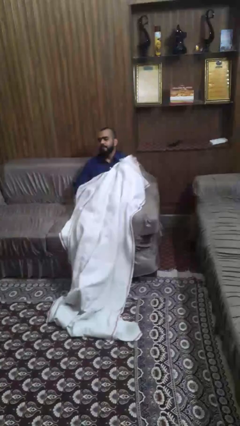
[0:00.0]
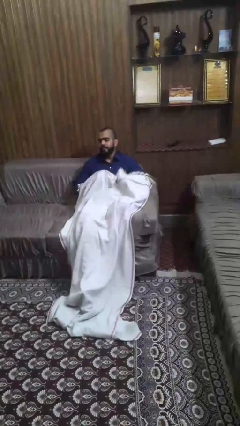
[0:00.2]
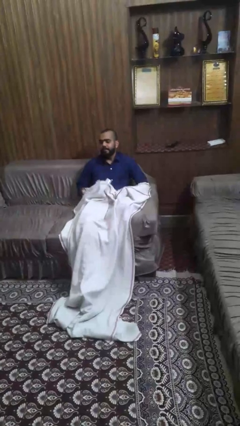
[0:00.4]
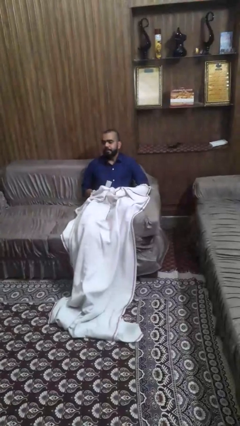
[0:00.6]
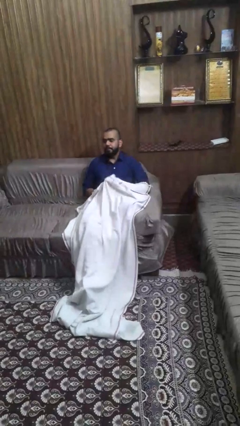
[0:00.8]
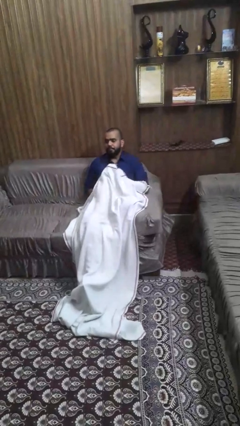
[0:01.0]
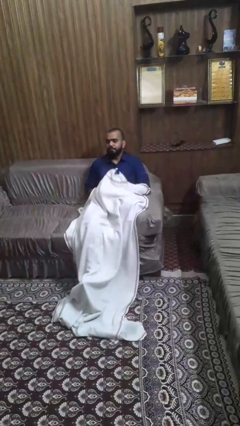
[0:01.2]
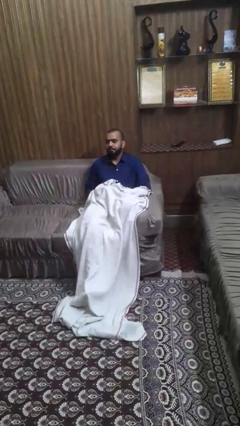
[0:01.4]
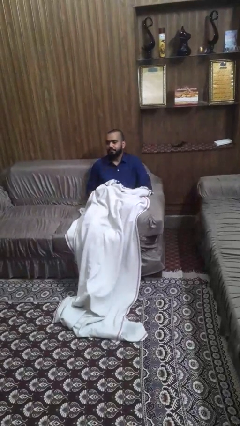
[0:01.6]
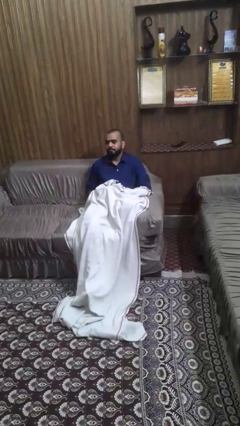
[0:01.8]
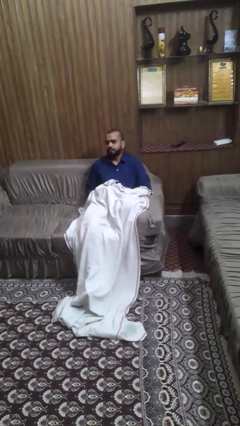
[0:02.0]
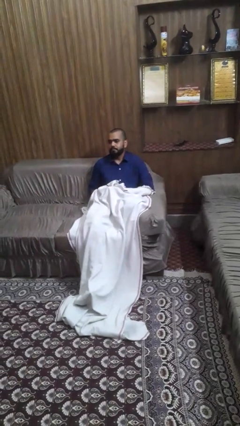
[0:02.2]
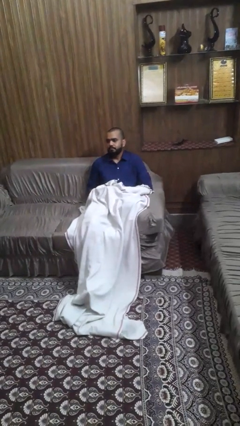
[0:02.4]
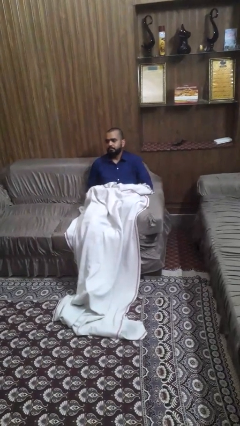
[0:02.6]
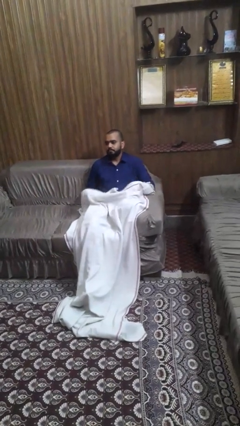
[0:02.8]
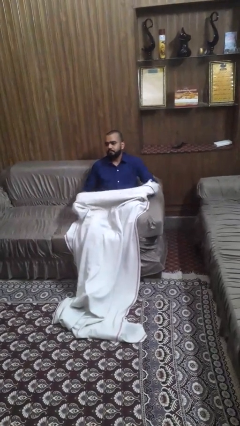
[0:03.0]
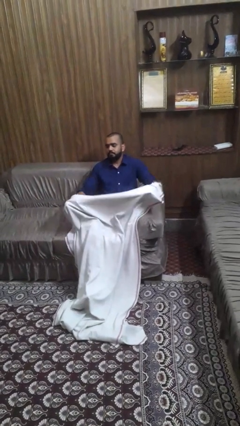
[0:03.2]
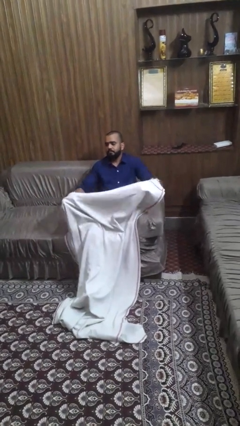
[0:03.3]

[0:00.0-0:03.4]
person covers with blanket

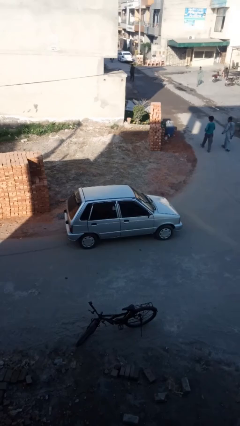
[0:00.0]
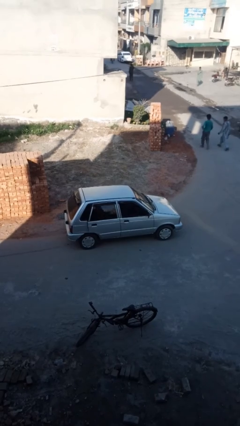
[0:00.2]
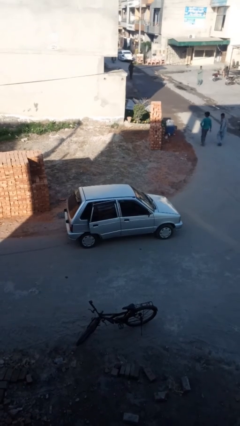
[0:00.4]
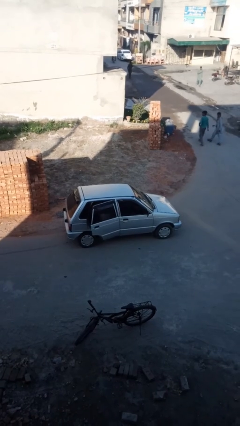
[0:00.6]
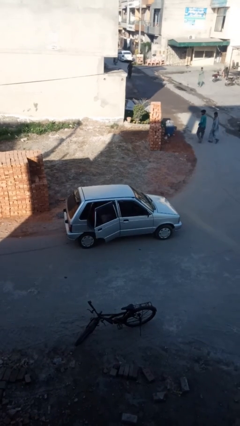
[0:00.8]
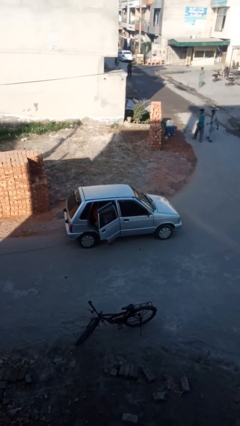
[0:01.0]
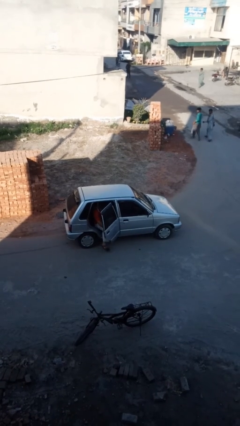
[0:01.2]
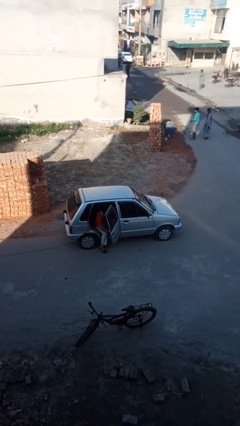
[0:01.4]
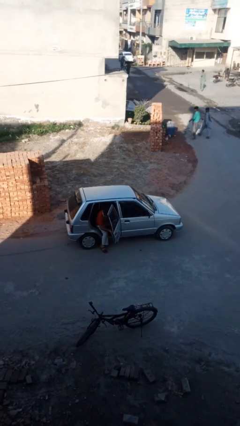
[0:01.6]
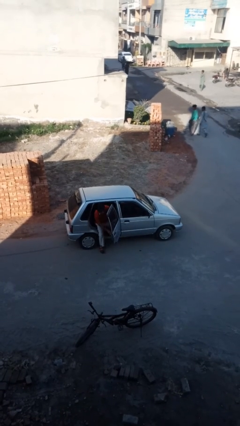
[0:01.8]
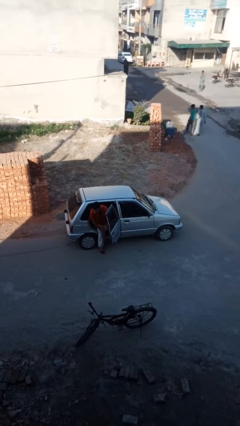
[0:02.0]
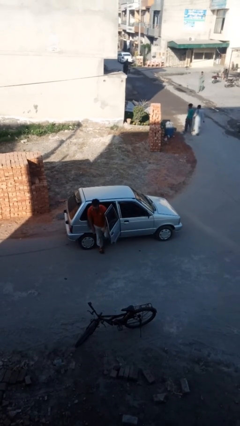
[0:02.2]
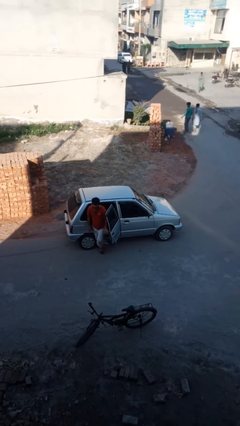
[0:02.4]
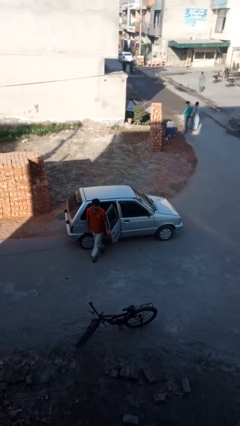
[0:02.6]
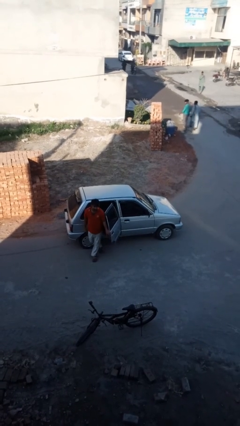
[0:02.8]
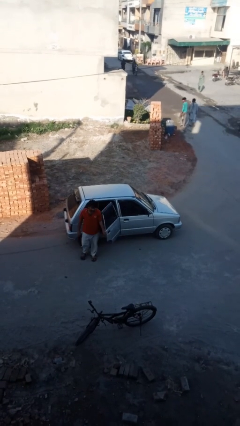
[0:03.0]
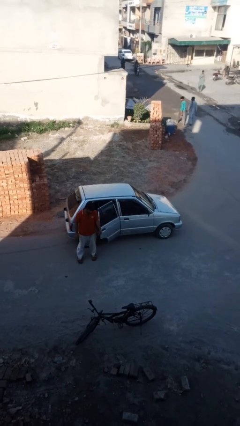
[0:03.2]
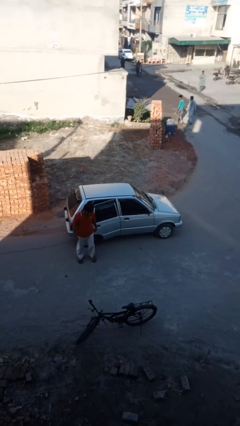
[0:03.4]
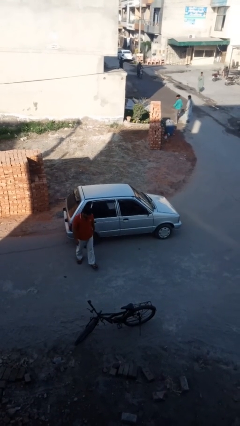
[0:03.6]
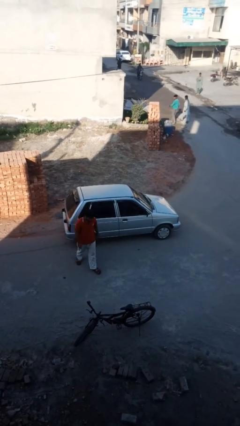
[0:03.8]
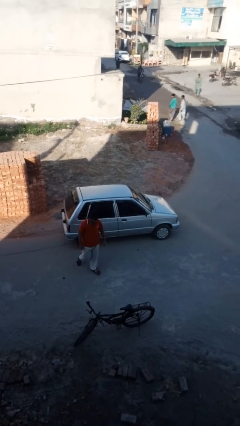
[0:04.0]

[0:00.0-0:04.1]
car drops off person

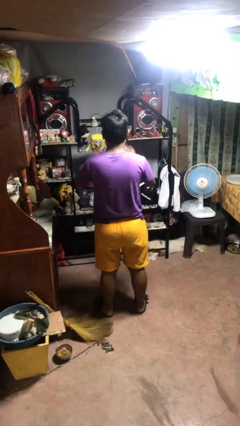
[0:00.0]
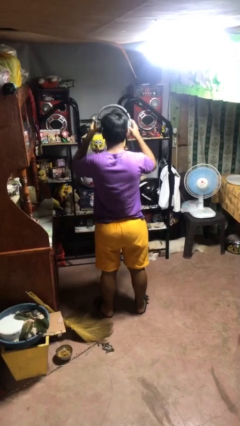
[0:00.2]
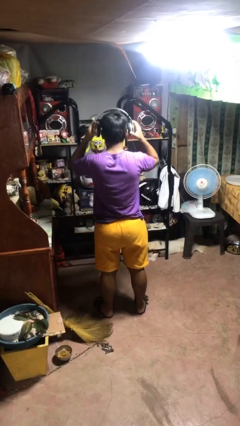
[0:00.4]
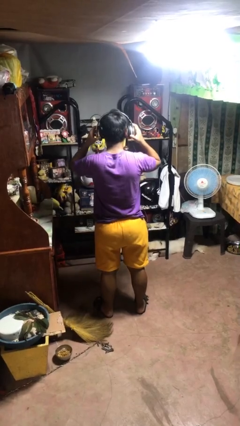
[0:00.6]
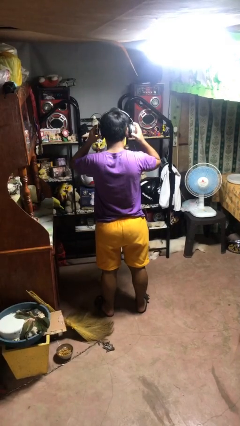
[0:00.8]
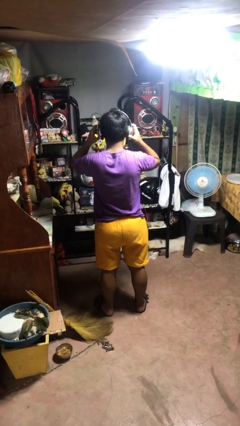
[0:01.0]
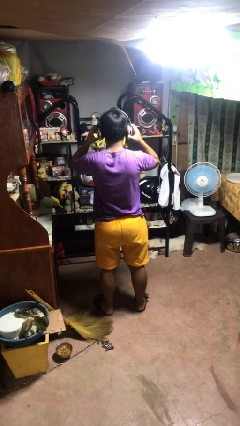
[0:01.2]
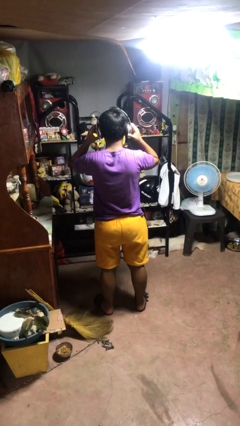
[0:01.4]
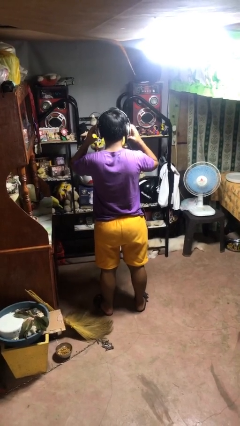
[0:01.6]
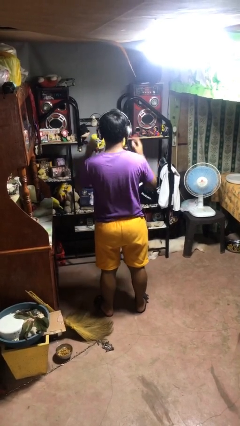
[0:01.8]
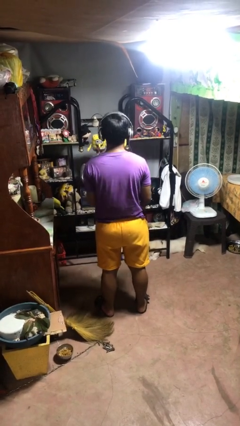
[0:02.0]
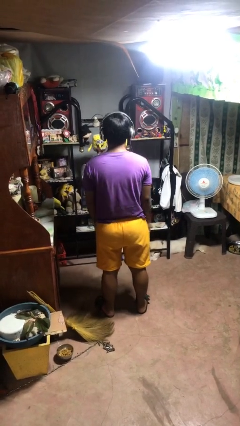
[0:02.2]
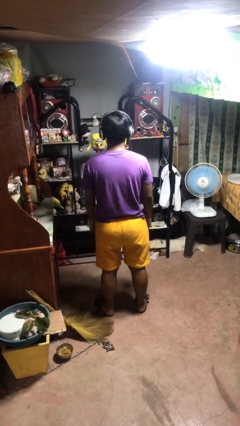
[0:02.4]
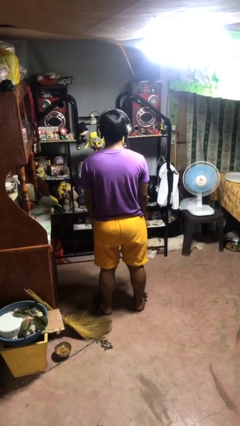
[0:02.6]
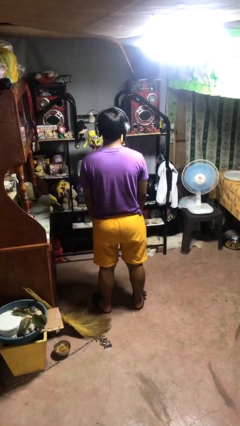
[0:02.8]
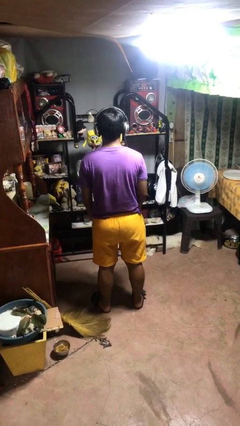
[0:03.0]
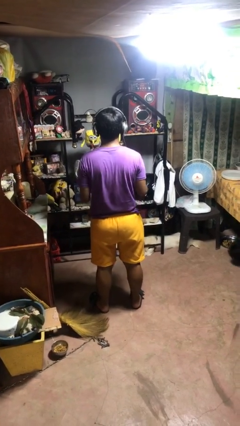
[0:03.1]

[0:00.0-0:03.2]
person puts on headphones

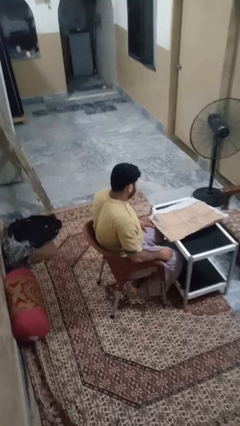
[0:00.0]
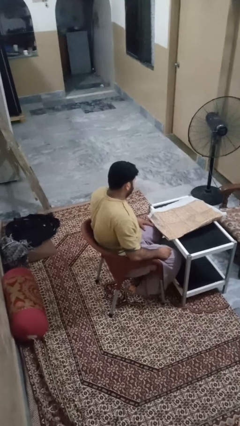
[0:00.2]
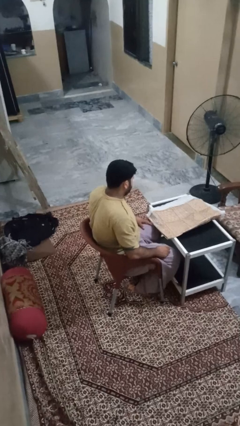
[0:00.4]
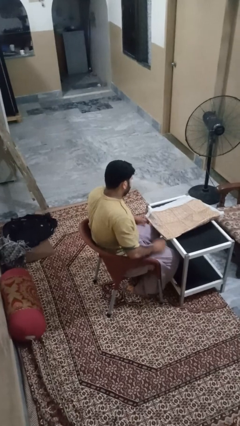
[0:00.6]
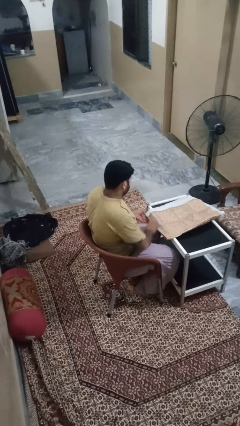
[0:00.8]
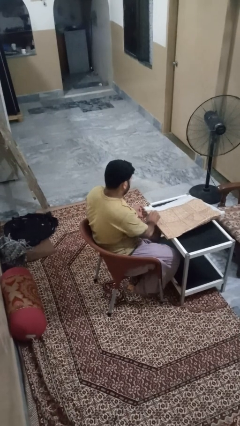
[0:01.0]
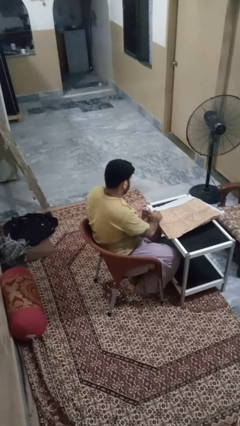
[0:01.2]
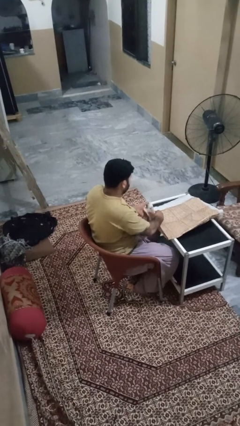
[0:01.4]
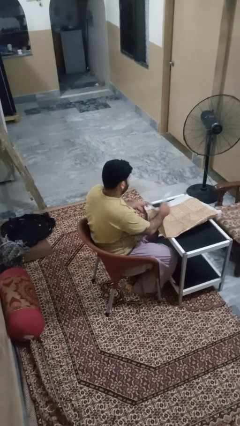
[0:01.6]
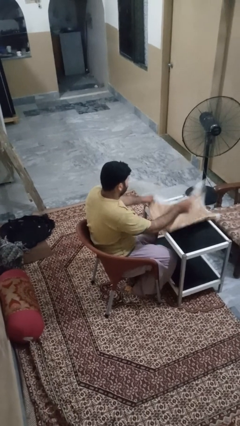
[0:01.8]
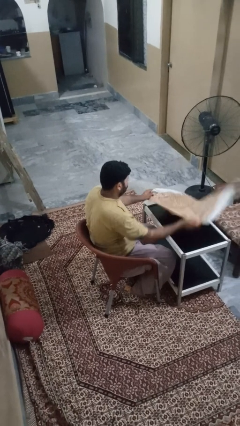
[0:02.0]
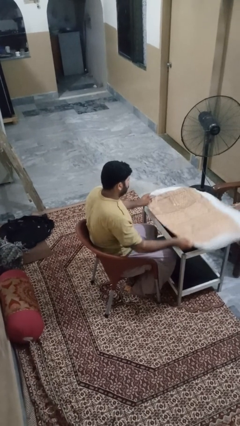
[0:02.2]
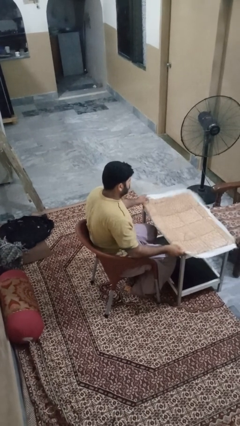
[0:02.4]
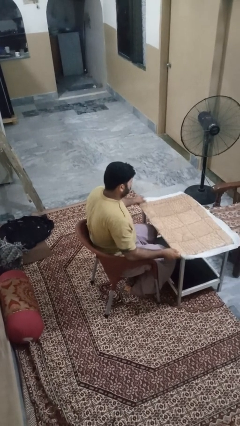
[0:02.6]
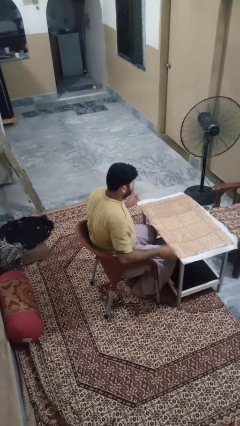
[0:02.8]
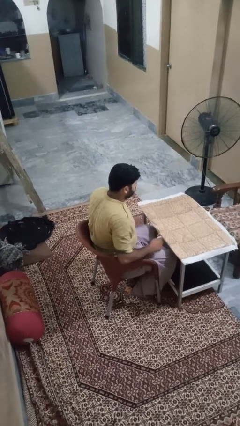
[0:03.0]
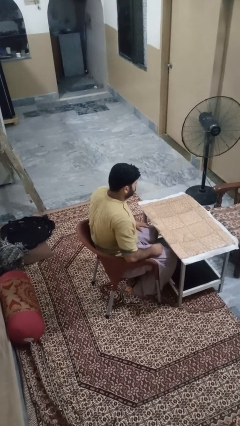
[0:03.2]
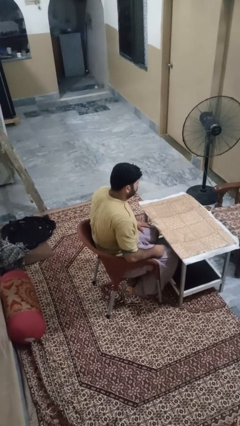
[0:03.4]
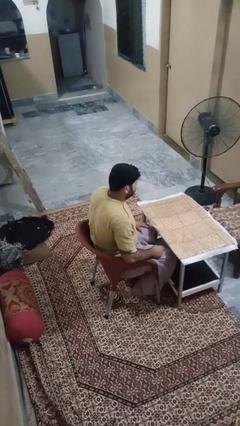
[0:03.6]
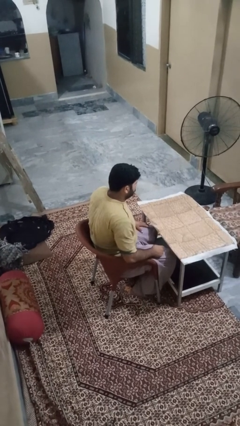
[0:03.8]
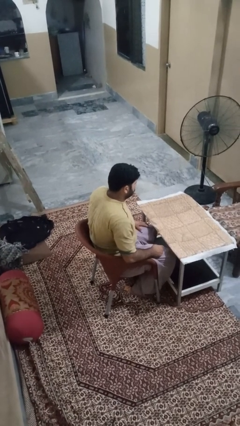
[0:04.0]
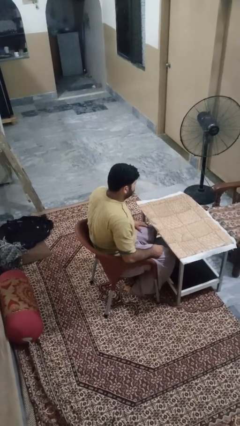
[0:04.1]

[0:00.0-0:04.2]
person spreads tablecloth

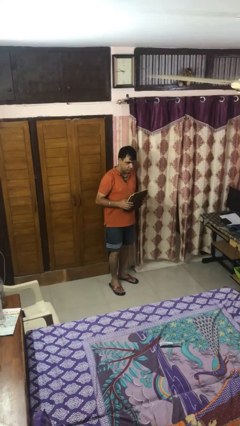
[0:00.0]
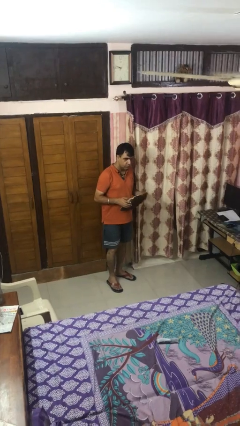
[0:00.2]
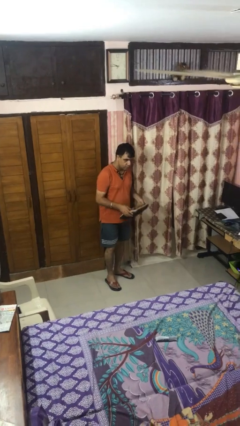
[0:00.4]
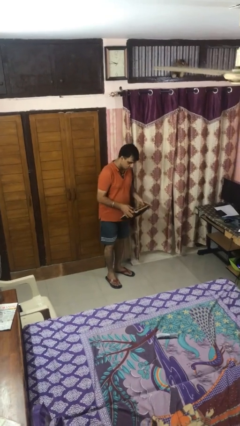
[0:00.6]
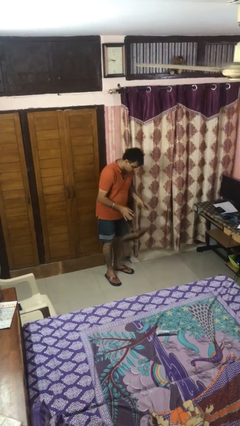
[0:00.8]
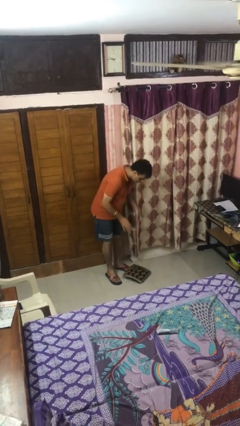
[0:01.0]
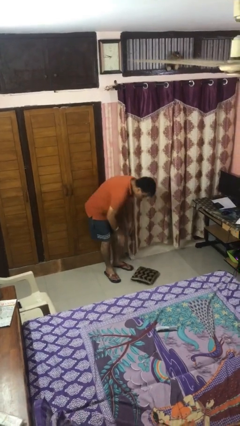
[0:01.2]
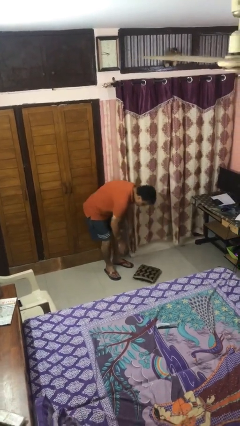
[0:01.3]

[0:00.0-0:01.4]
person drops object

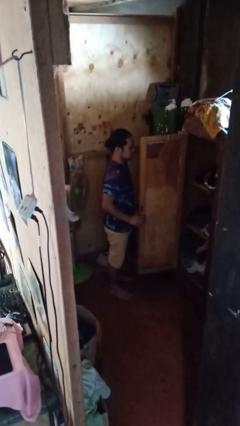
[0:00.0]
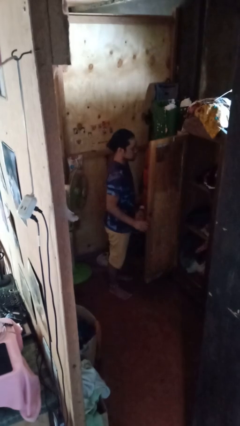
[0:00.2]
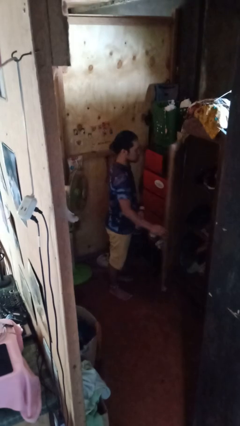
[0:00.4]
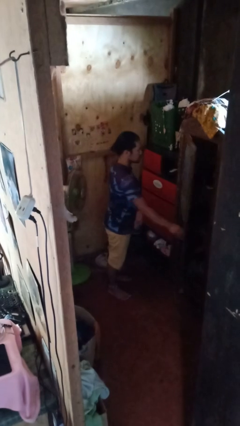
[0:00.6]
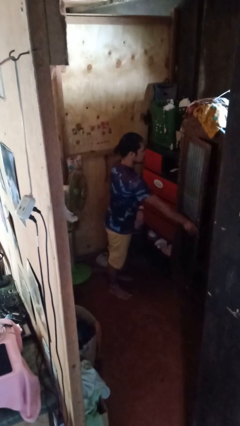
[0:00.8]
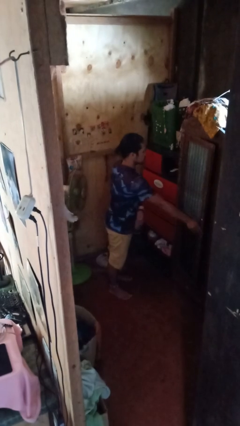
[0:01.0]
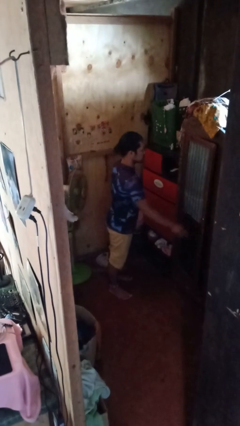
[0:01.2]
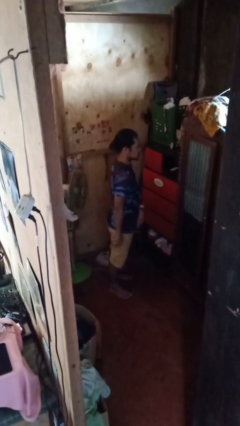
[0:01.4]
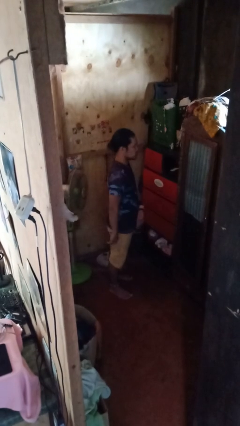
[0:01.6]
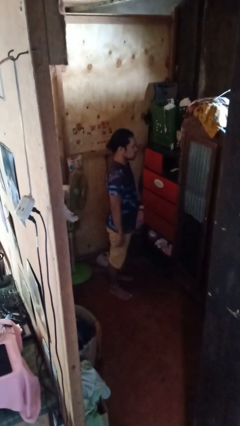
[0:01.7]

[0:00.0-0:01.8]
person closes closet door
